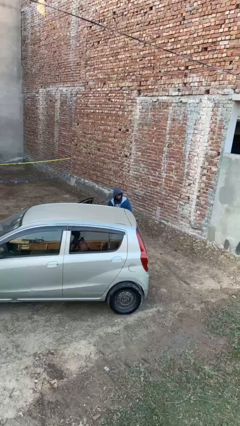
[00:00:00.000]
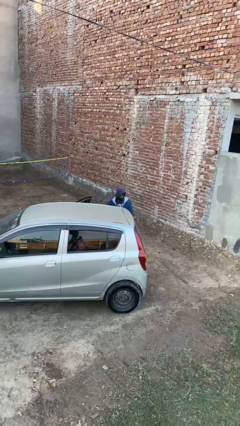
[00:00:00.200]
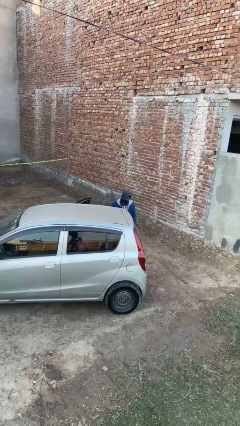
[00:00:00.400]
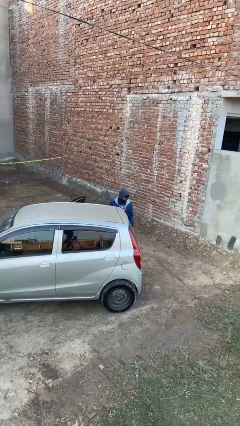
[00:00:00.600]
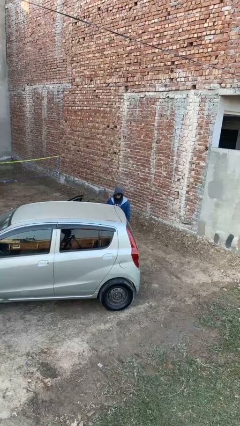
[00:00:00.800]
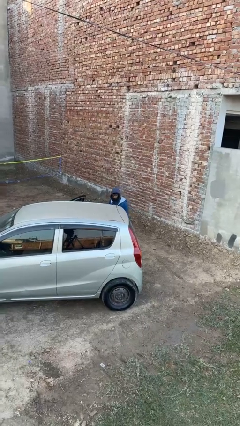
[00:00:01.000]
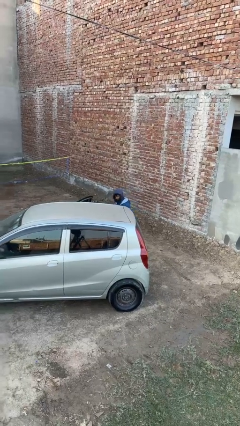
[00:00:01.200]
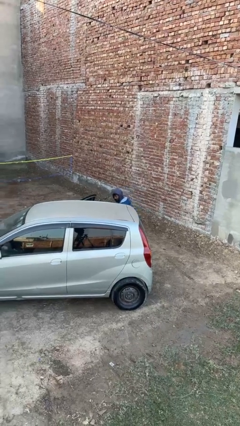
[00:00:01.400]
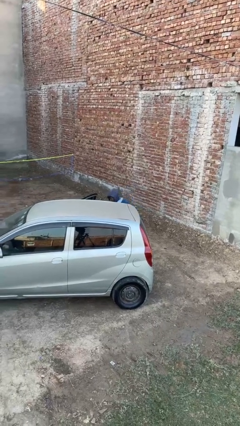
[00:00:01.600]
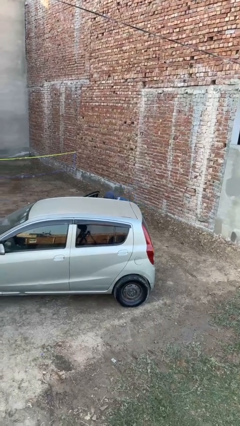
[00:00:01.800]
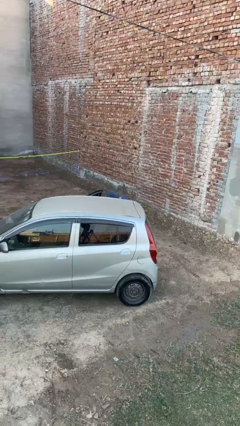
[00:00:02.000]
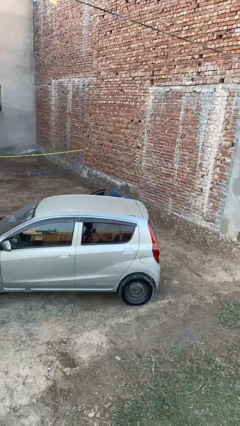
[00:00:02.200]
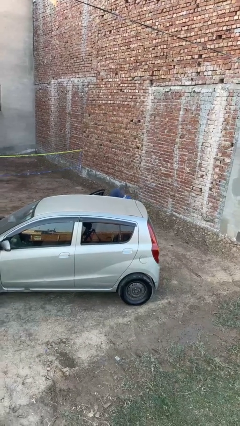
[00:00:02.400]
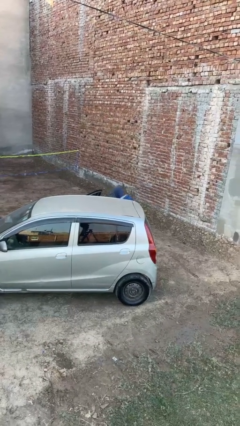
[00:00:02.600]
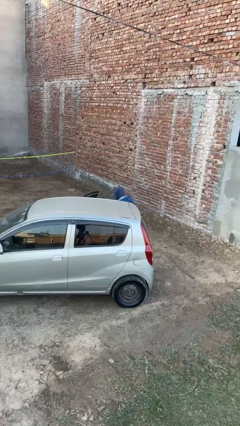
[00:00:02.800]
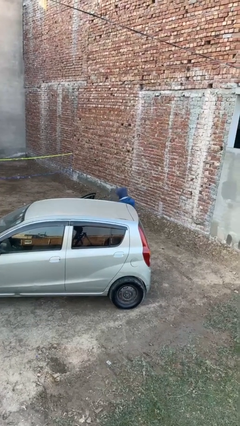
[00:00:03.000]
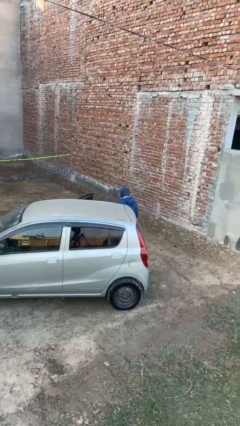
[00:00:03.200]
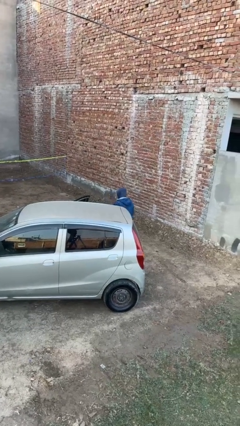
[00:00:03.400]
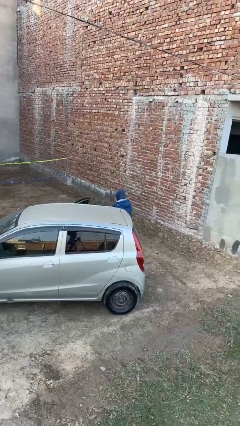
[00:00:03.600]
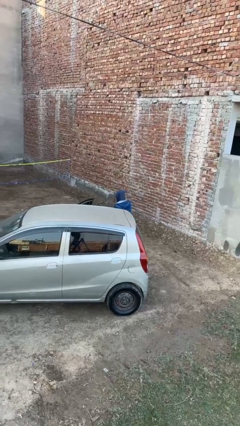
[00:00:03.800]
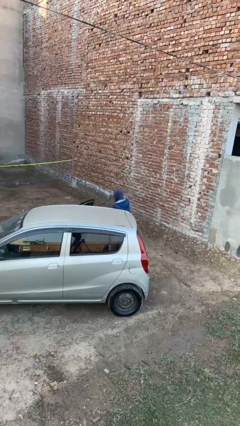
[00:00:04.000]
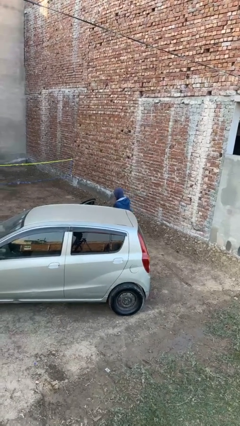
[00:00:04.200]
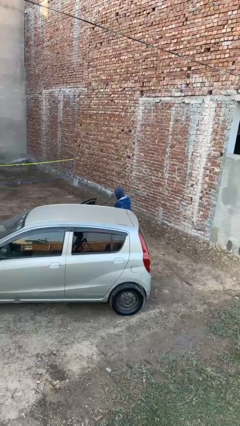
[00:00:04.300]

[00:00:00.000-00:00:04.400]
person unloads car

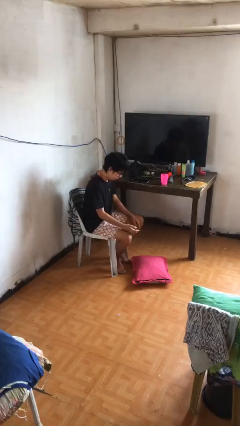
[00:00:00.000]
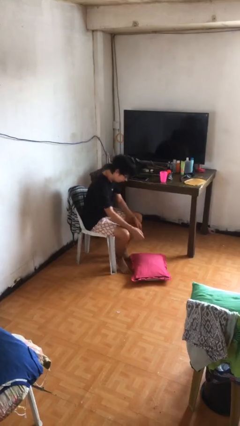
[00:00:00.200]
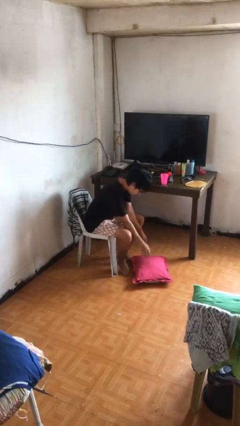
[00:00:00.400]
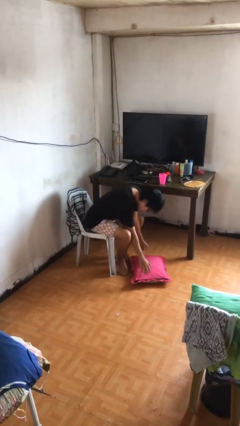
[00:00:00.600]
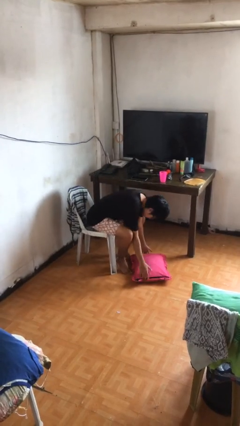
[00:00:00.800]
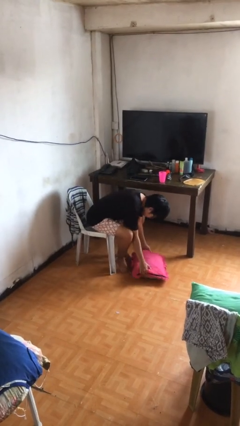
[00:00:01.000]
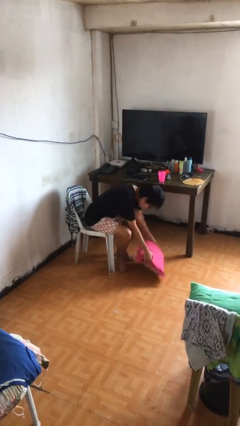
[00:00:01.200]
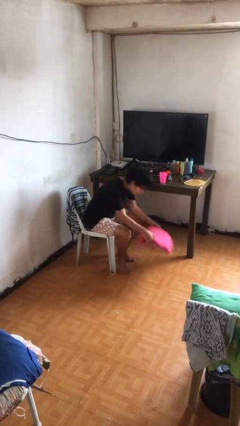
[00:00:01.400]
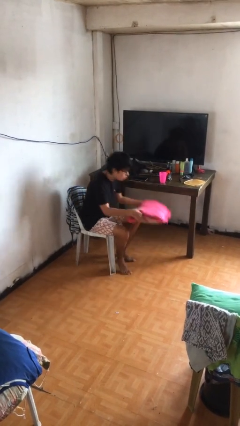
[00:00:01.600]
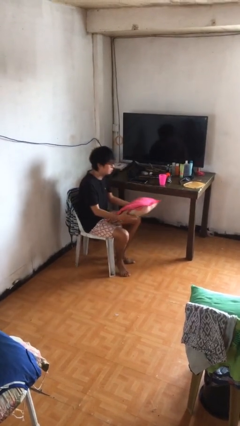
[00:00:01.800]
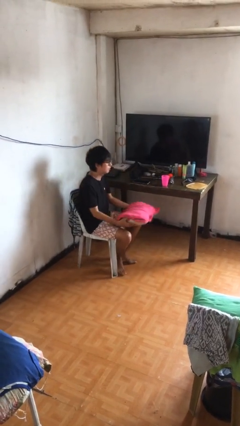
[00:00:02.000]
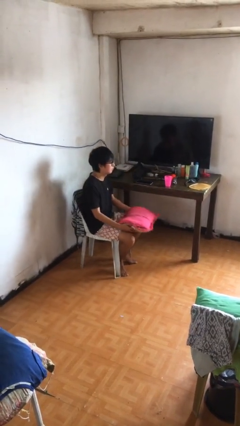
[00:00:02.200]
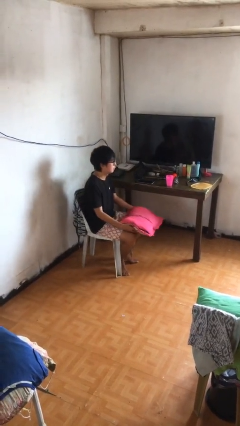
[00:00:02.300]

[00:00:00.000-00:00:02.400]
person picks up object from floor

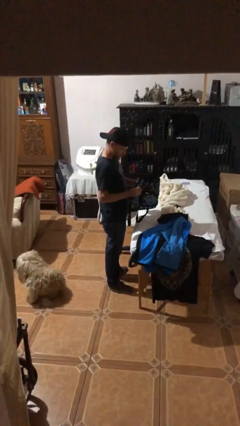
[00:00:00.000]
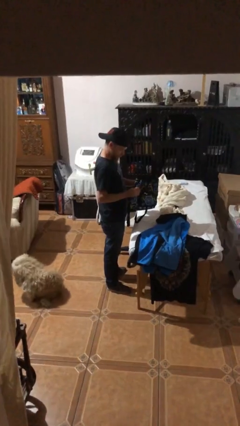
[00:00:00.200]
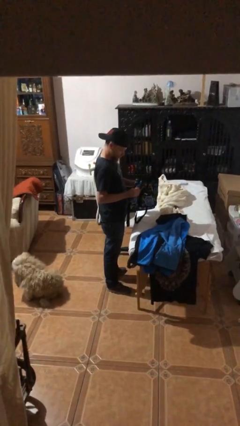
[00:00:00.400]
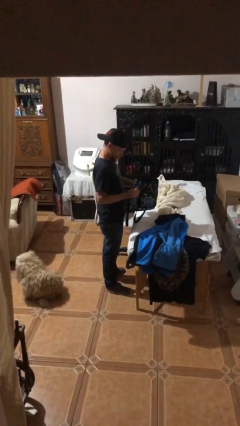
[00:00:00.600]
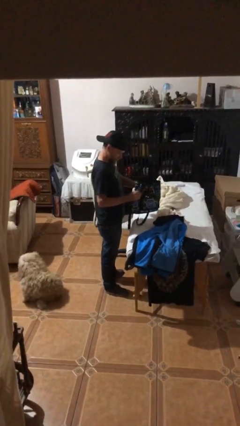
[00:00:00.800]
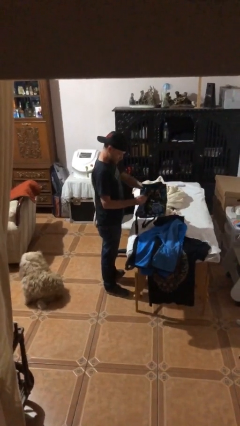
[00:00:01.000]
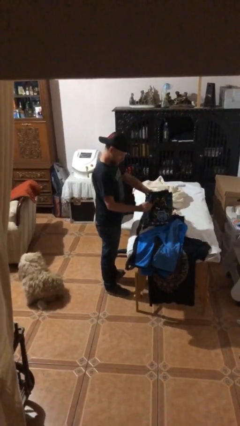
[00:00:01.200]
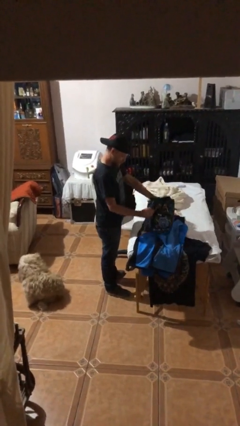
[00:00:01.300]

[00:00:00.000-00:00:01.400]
person puts down object on table

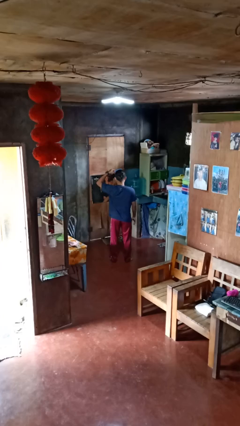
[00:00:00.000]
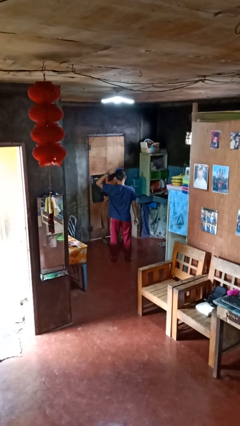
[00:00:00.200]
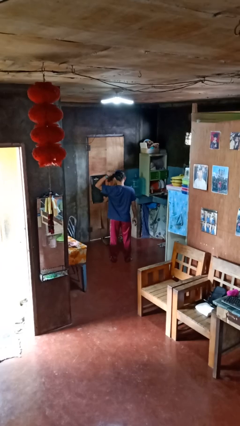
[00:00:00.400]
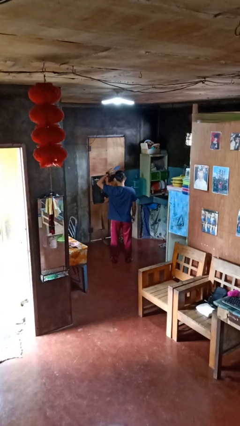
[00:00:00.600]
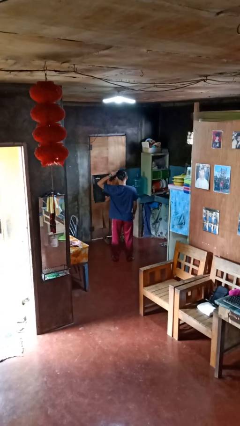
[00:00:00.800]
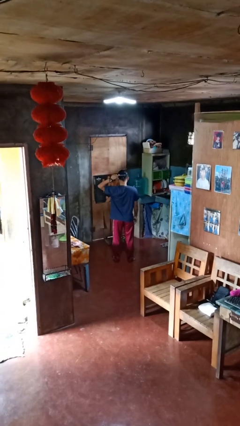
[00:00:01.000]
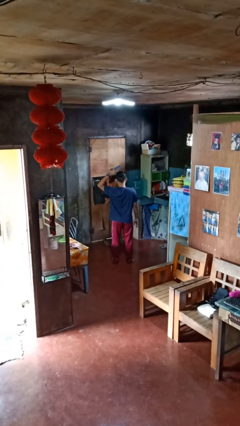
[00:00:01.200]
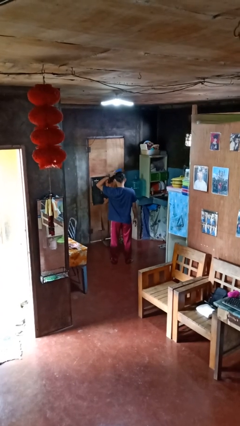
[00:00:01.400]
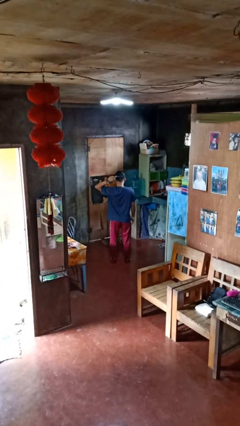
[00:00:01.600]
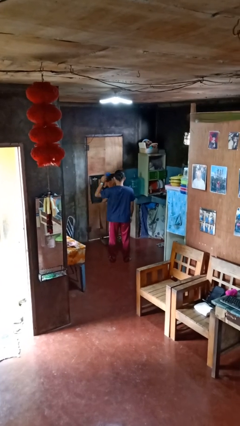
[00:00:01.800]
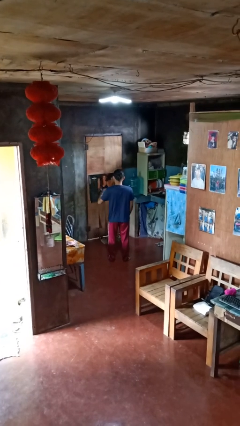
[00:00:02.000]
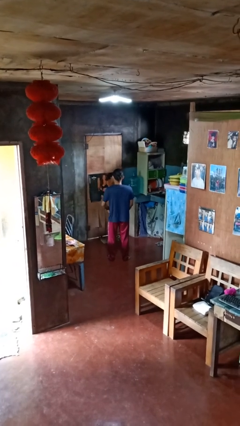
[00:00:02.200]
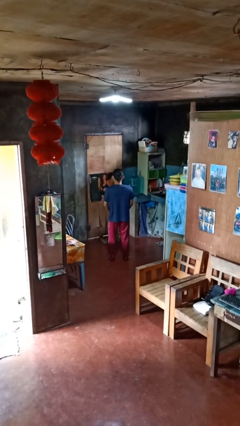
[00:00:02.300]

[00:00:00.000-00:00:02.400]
person brushes hair

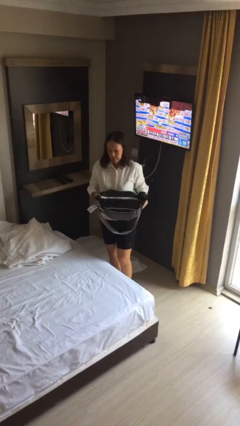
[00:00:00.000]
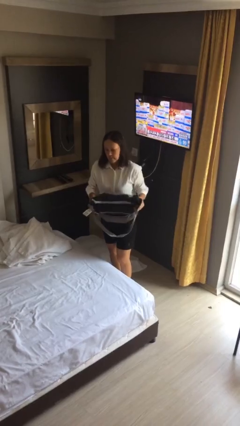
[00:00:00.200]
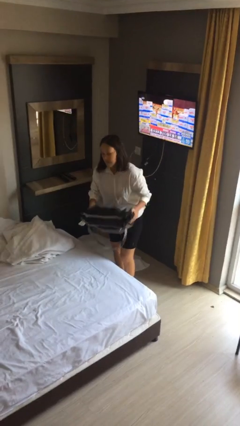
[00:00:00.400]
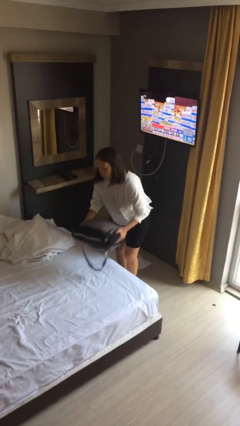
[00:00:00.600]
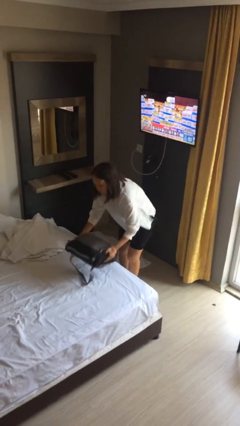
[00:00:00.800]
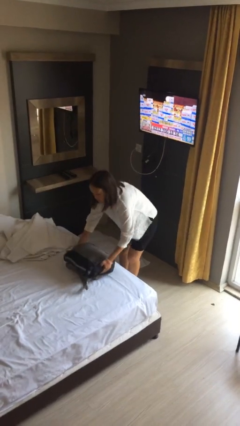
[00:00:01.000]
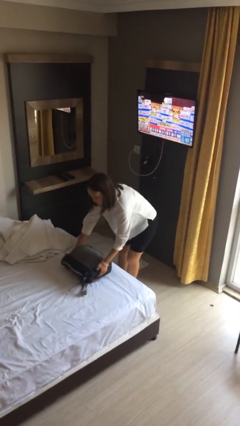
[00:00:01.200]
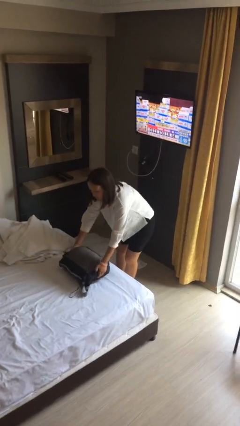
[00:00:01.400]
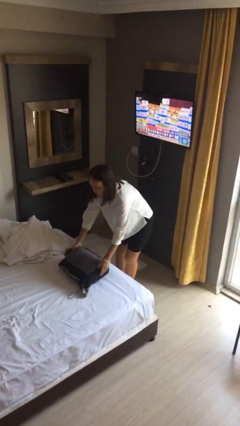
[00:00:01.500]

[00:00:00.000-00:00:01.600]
person puts down object on bed

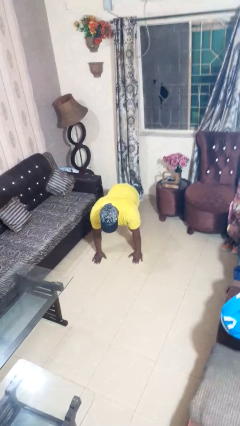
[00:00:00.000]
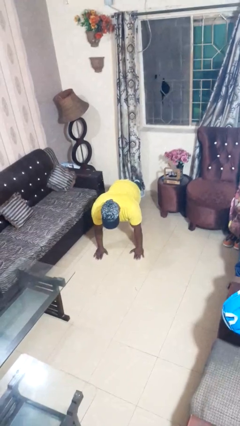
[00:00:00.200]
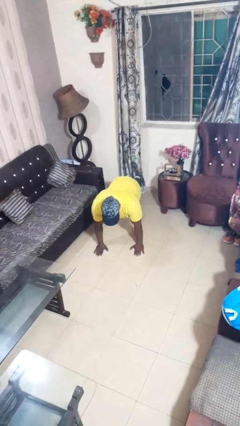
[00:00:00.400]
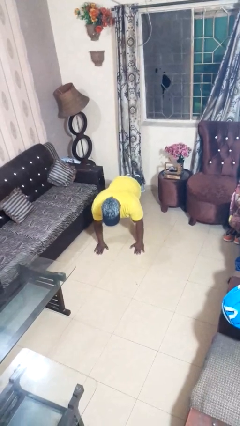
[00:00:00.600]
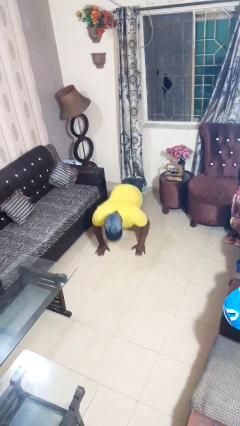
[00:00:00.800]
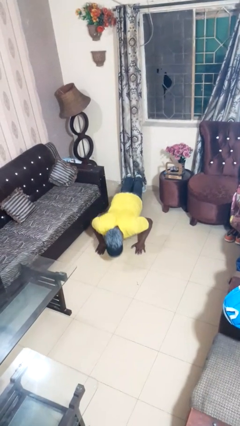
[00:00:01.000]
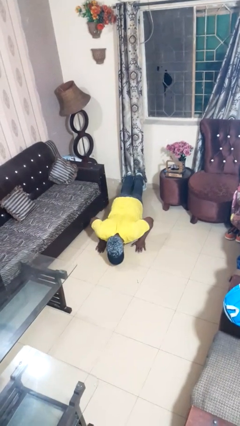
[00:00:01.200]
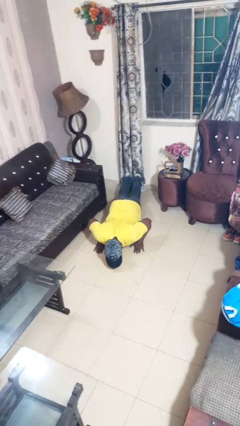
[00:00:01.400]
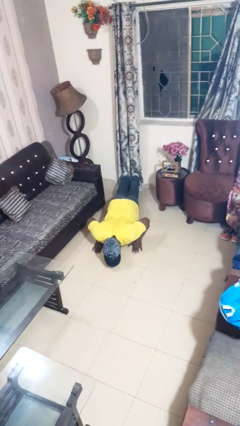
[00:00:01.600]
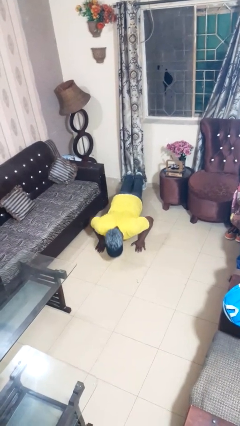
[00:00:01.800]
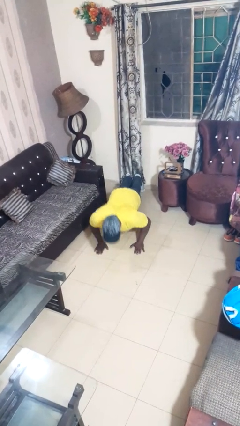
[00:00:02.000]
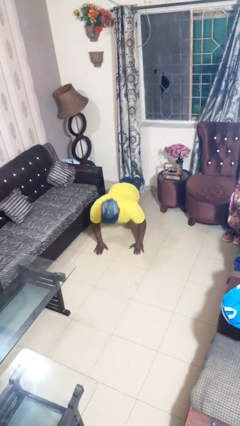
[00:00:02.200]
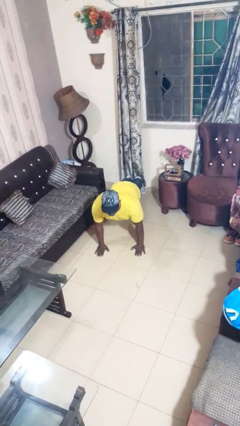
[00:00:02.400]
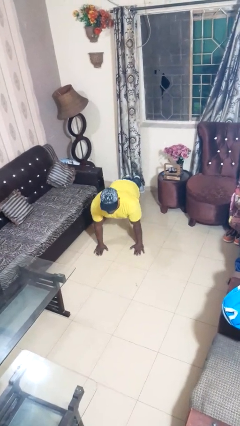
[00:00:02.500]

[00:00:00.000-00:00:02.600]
person exercises with pushup

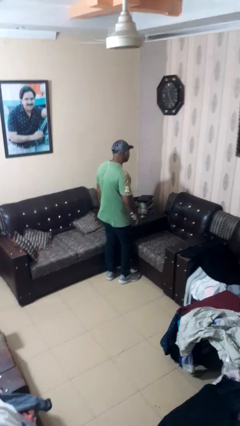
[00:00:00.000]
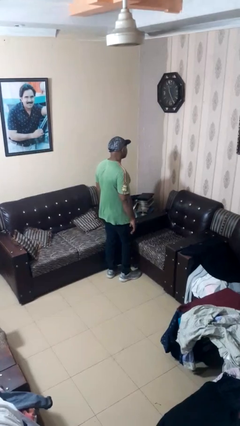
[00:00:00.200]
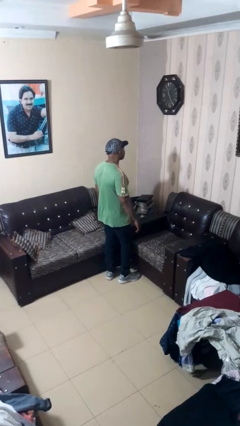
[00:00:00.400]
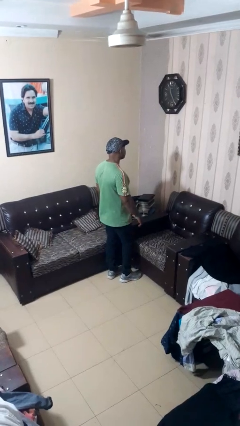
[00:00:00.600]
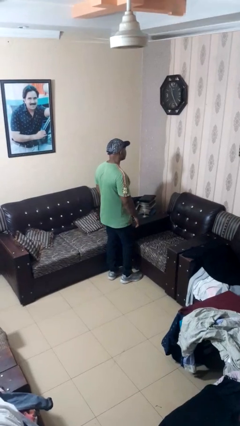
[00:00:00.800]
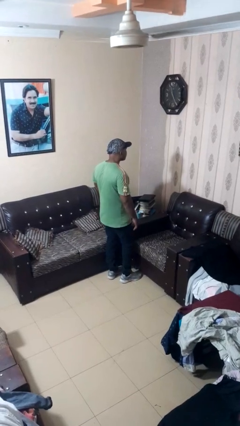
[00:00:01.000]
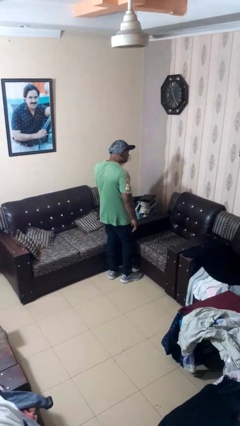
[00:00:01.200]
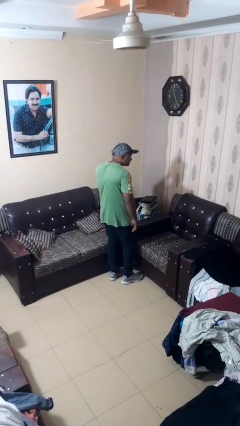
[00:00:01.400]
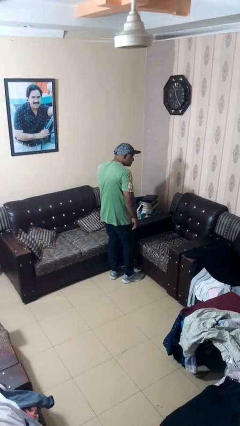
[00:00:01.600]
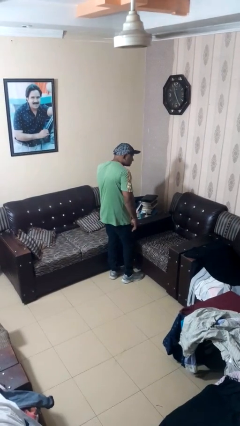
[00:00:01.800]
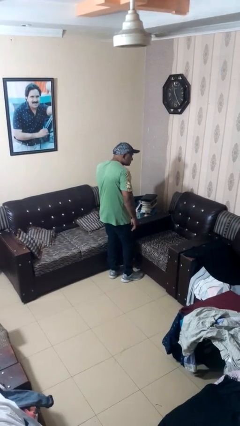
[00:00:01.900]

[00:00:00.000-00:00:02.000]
person gestures listen closely

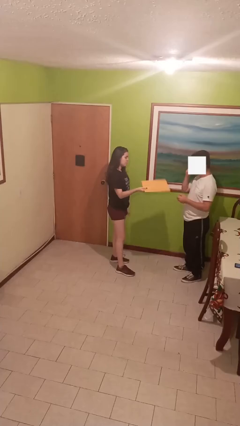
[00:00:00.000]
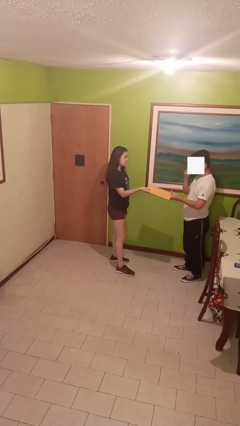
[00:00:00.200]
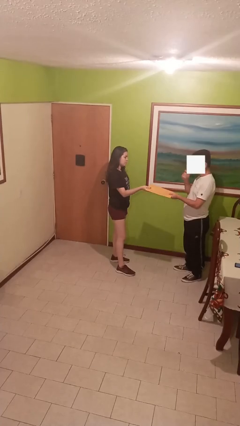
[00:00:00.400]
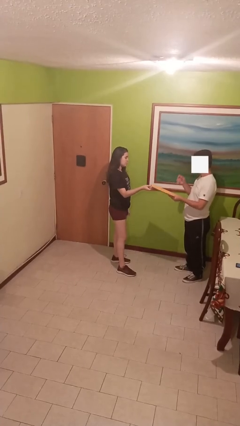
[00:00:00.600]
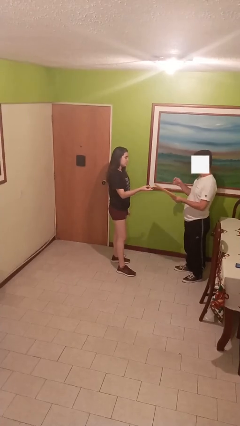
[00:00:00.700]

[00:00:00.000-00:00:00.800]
person transfers object to person
